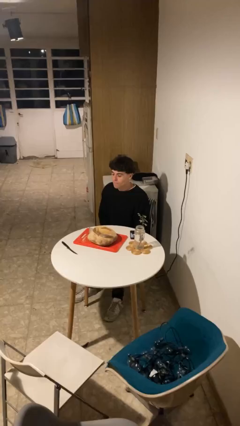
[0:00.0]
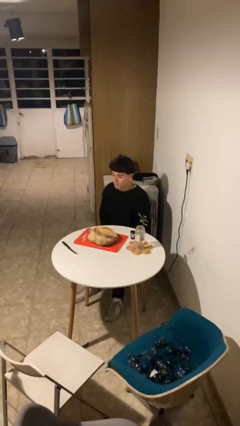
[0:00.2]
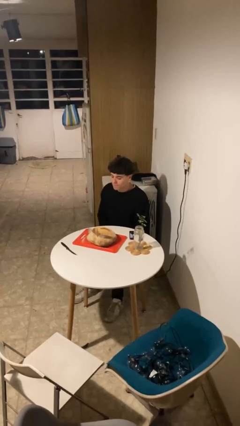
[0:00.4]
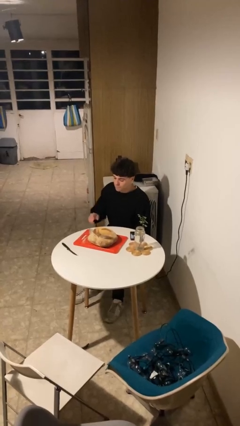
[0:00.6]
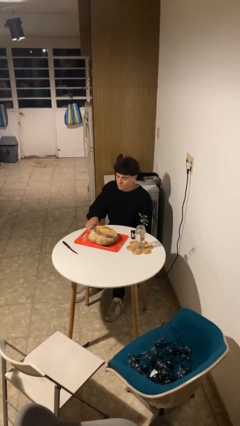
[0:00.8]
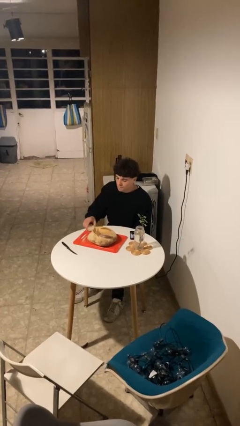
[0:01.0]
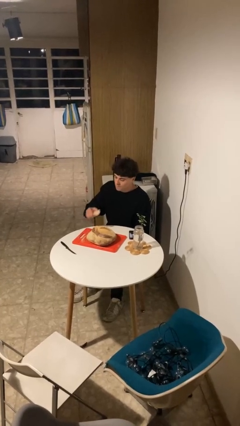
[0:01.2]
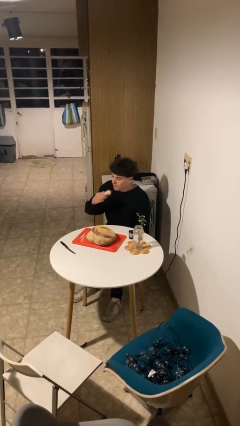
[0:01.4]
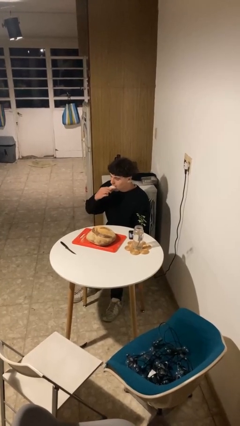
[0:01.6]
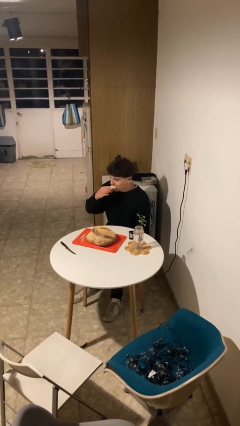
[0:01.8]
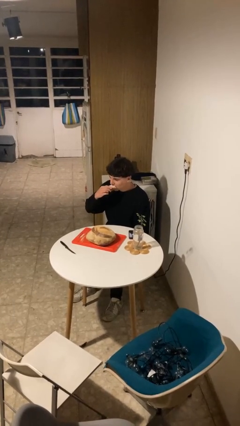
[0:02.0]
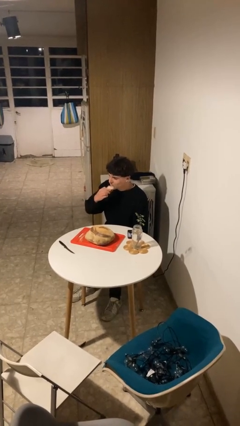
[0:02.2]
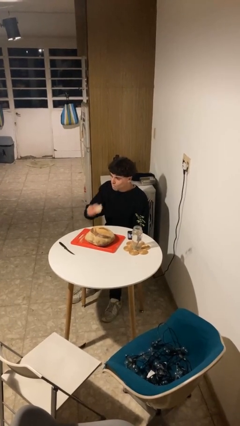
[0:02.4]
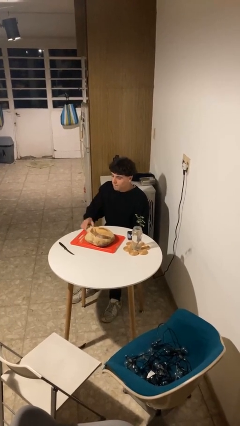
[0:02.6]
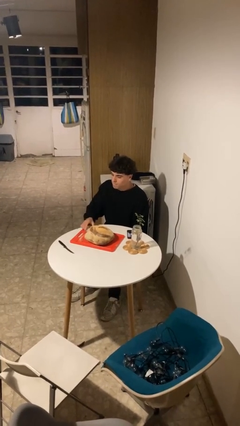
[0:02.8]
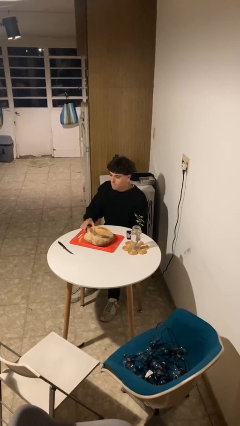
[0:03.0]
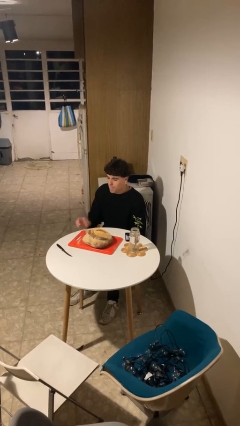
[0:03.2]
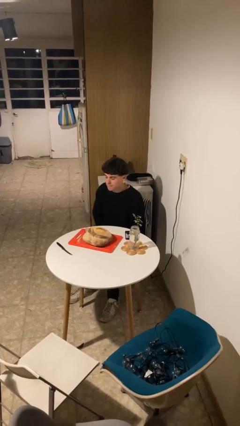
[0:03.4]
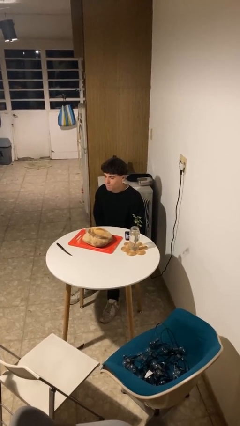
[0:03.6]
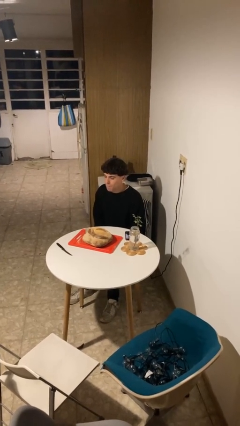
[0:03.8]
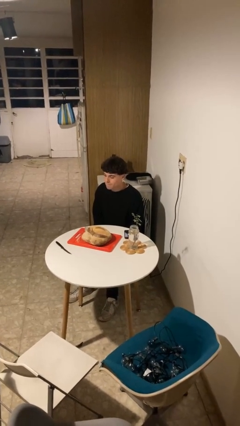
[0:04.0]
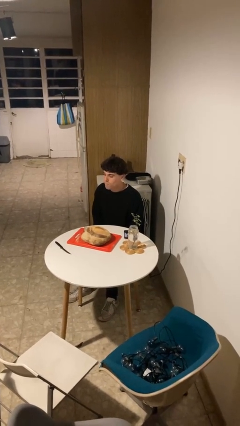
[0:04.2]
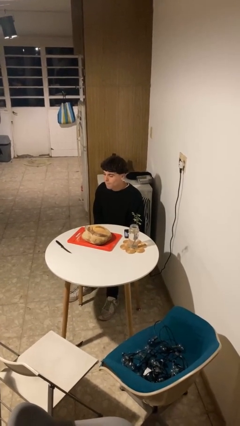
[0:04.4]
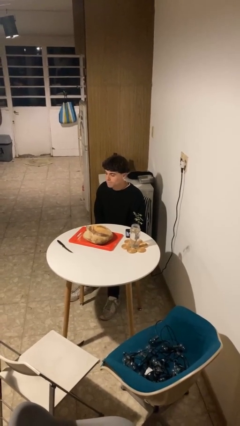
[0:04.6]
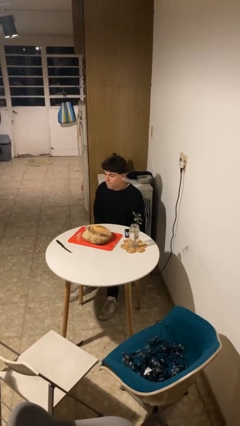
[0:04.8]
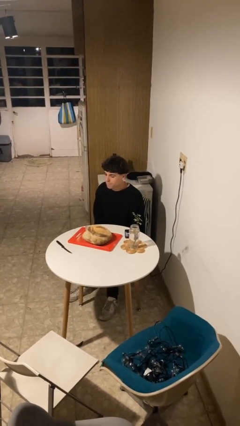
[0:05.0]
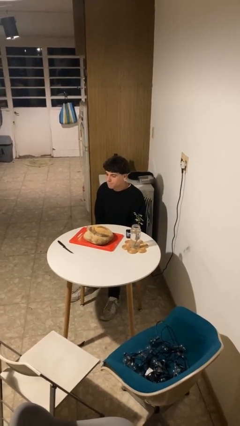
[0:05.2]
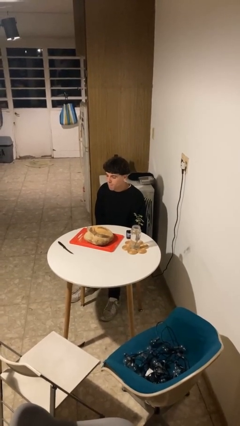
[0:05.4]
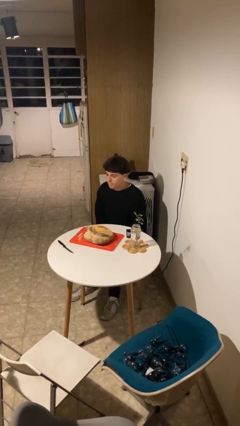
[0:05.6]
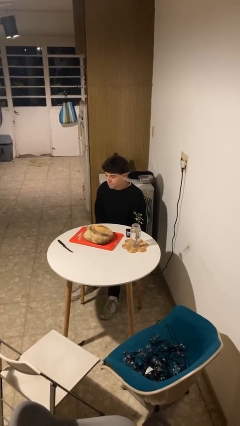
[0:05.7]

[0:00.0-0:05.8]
person eats with hands

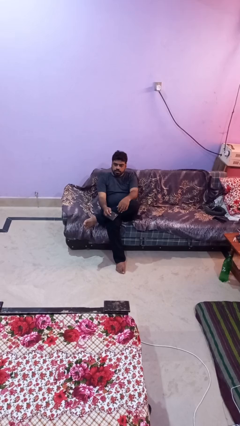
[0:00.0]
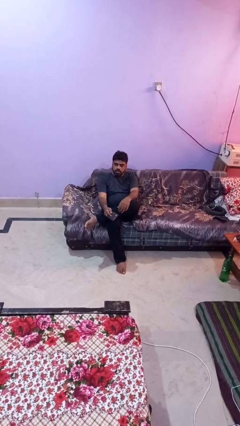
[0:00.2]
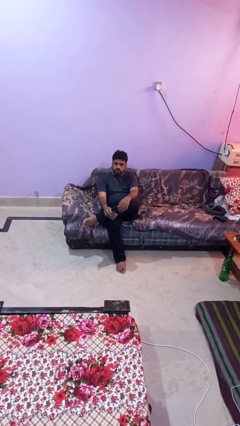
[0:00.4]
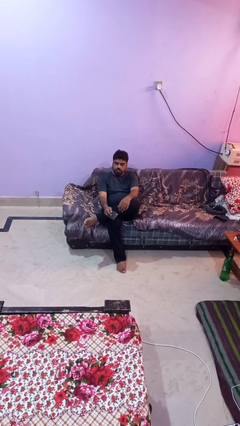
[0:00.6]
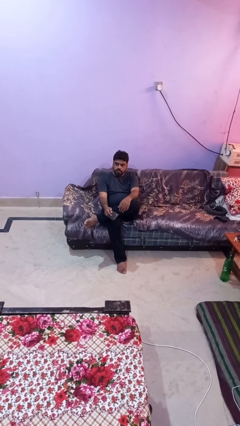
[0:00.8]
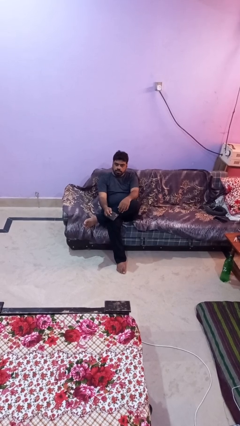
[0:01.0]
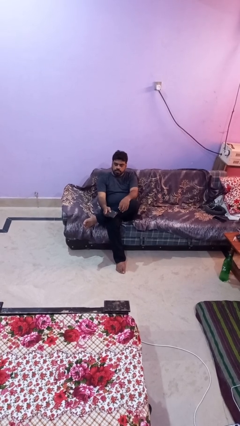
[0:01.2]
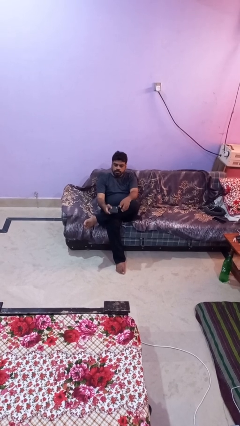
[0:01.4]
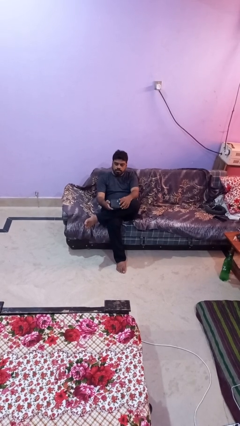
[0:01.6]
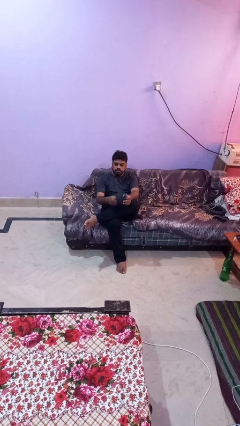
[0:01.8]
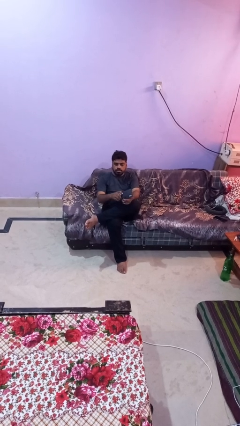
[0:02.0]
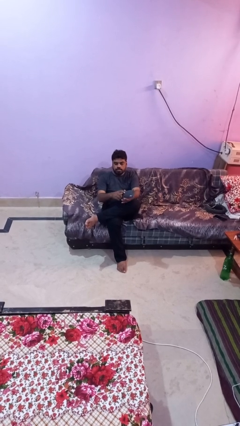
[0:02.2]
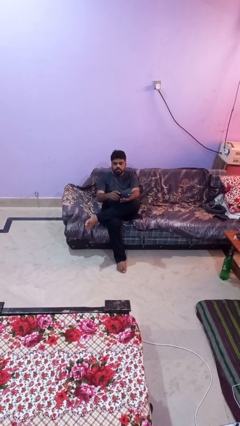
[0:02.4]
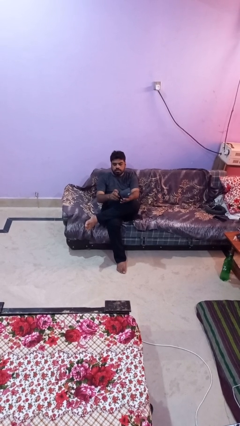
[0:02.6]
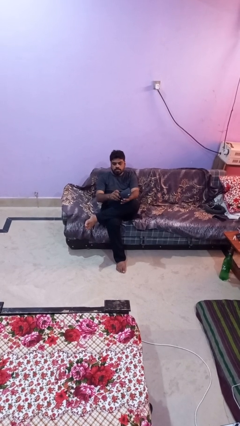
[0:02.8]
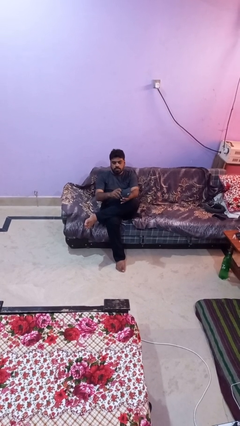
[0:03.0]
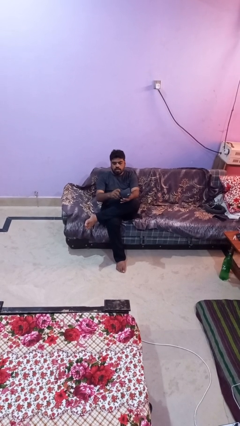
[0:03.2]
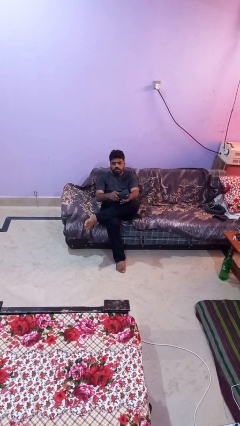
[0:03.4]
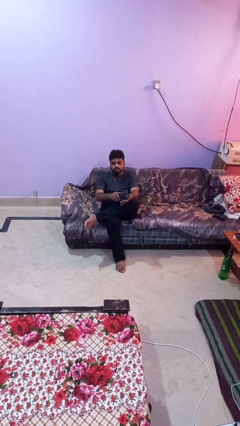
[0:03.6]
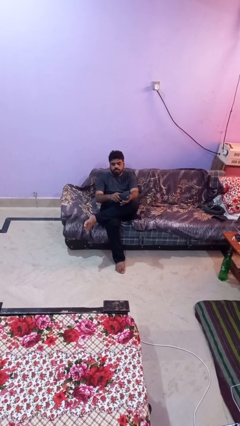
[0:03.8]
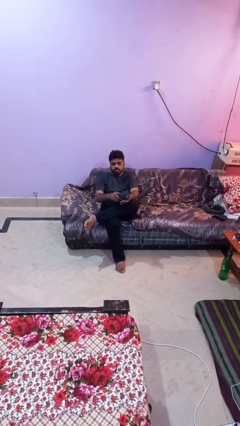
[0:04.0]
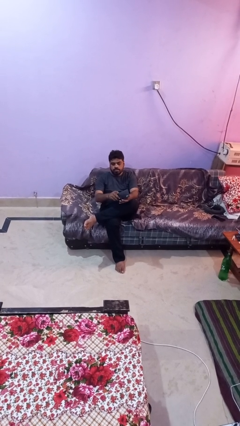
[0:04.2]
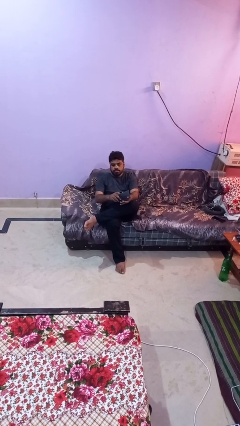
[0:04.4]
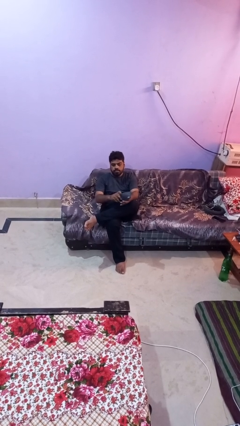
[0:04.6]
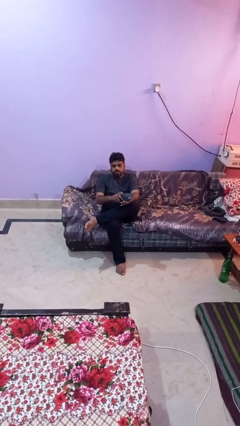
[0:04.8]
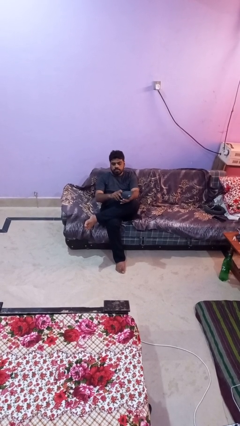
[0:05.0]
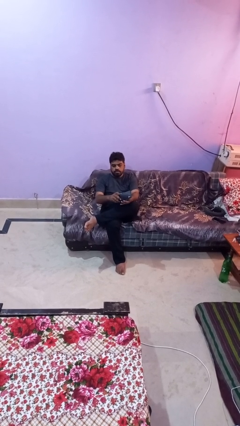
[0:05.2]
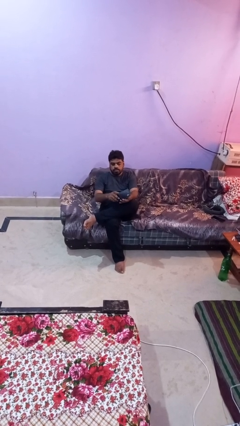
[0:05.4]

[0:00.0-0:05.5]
person searches in purse

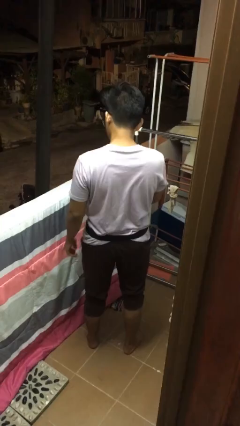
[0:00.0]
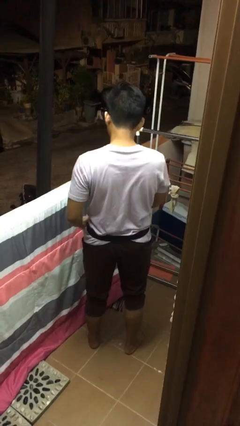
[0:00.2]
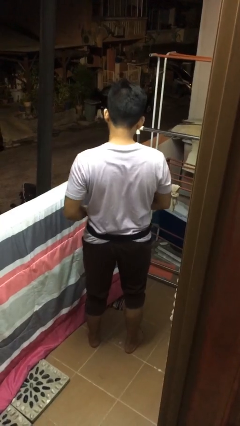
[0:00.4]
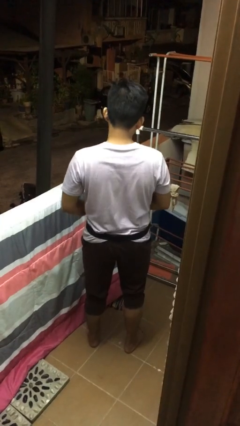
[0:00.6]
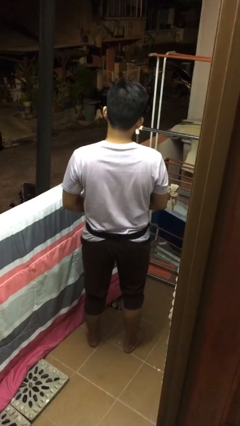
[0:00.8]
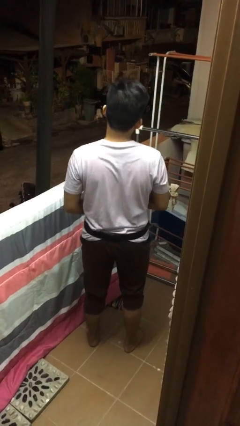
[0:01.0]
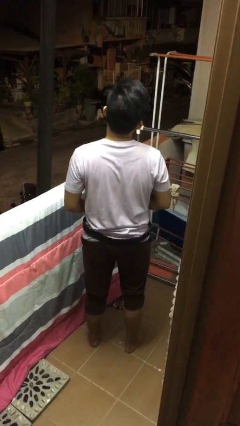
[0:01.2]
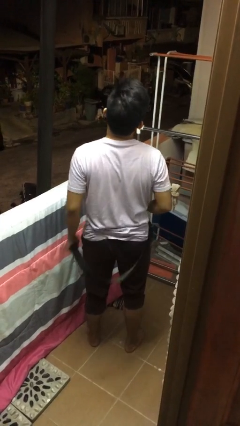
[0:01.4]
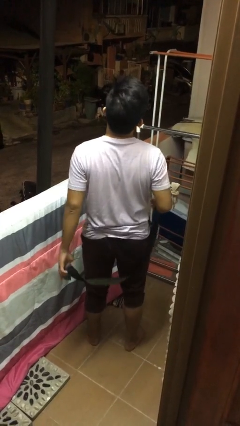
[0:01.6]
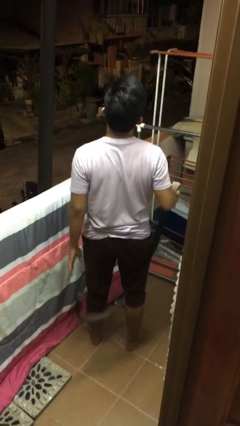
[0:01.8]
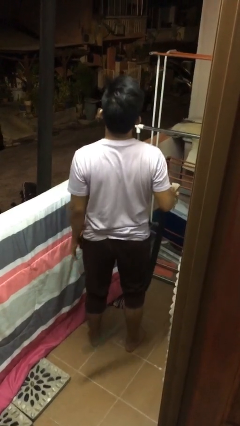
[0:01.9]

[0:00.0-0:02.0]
person takes off belt

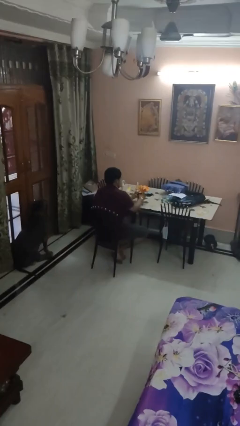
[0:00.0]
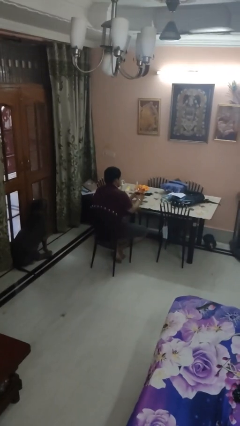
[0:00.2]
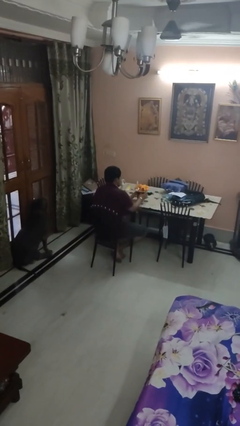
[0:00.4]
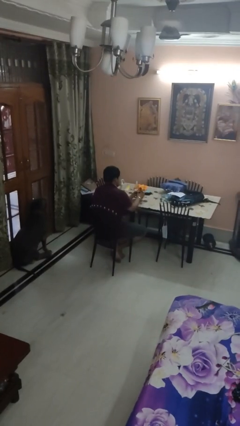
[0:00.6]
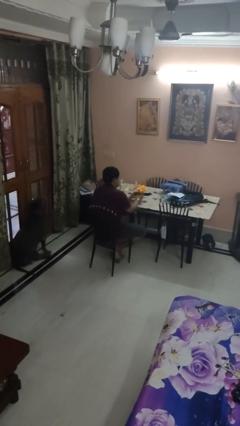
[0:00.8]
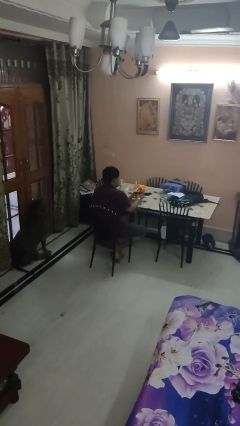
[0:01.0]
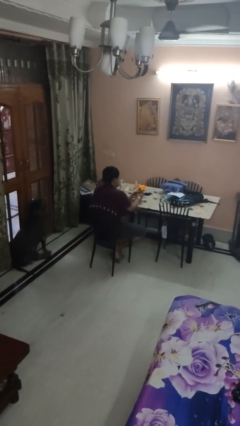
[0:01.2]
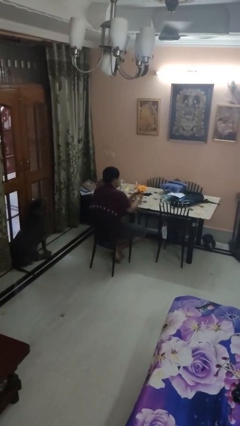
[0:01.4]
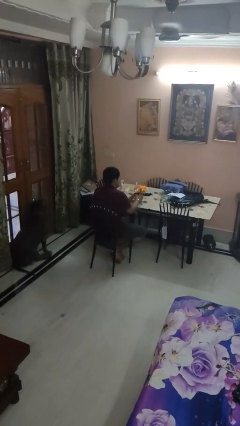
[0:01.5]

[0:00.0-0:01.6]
person arranges flowers in vase

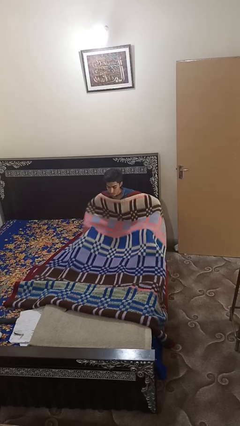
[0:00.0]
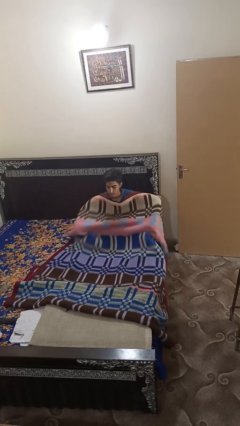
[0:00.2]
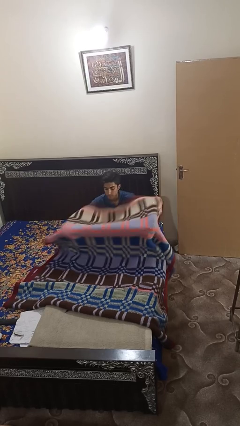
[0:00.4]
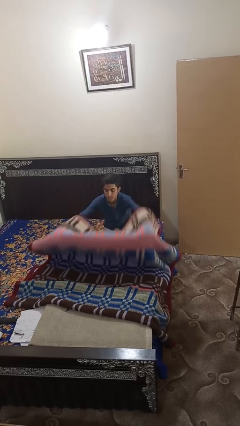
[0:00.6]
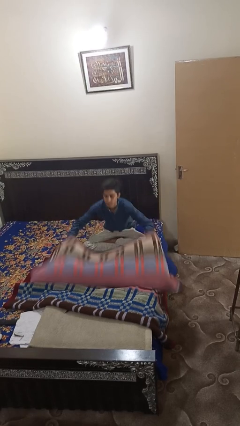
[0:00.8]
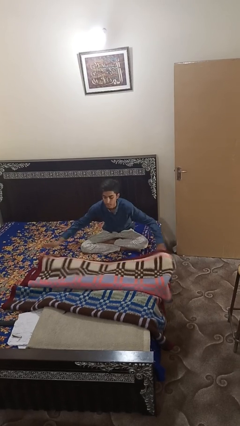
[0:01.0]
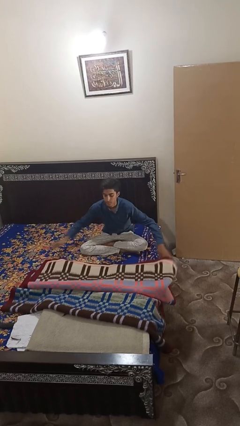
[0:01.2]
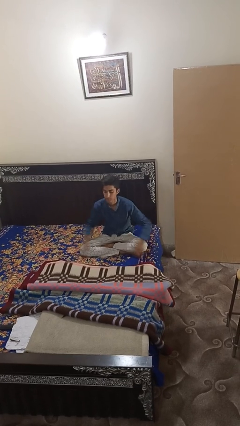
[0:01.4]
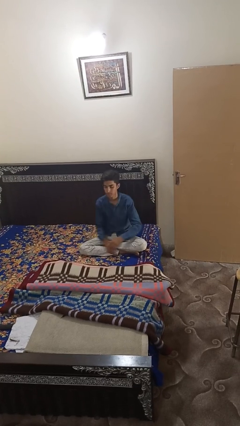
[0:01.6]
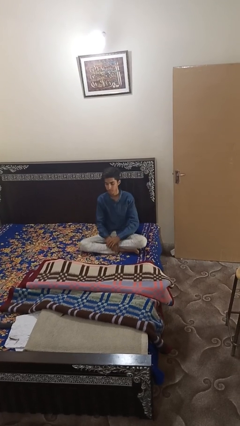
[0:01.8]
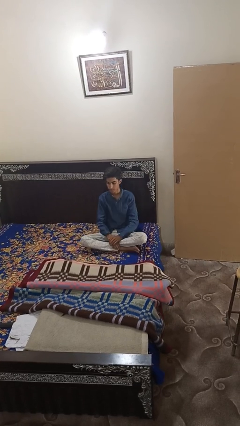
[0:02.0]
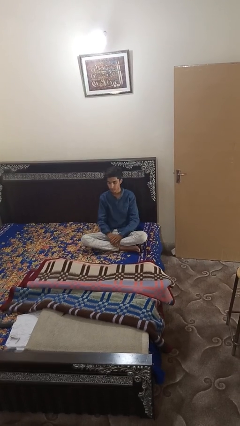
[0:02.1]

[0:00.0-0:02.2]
person uncovers with blanket

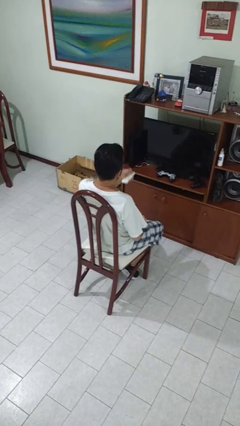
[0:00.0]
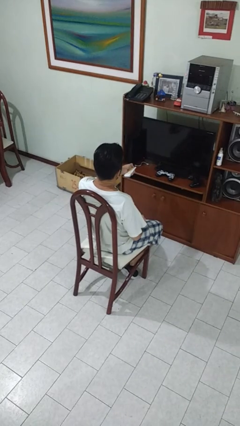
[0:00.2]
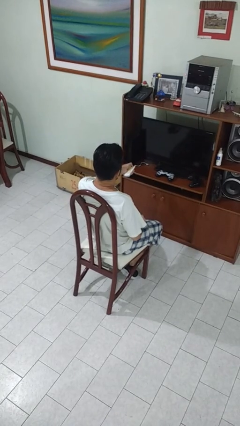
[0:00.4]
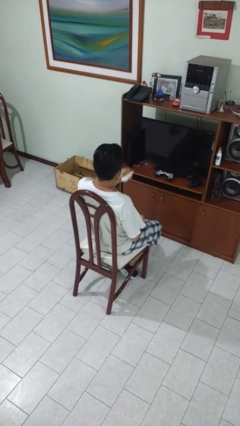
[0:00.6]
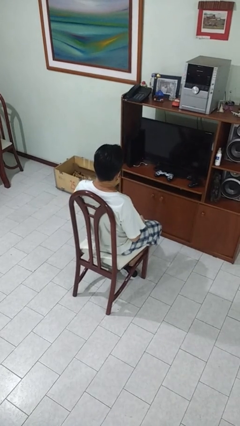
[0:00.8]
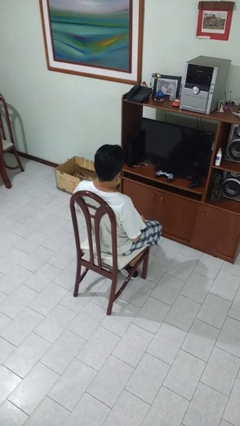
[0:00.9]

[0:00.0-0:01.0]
person uses television remote
